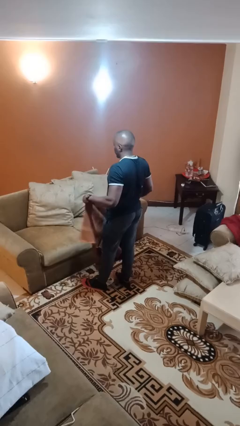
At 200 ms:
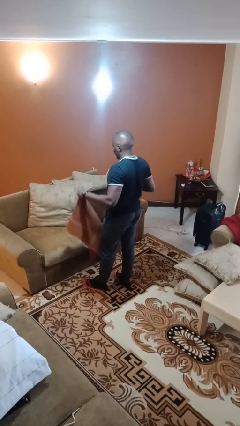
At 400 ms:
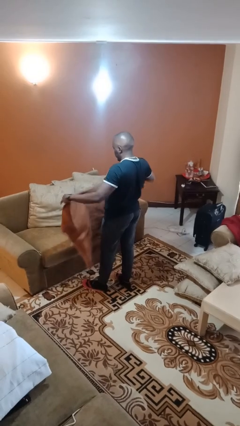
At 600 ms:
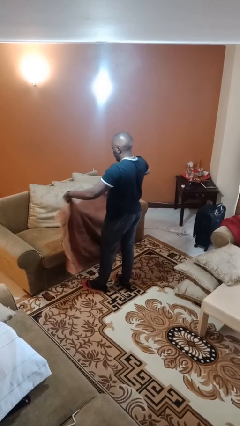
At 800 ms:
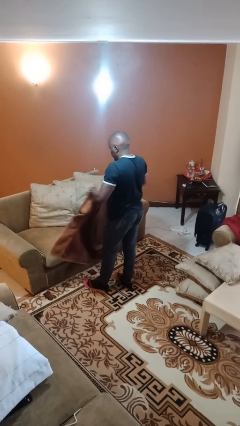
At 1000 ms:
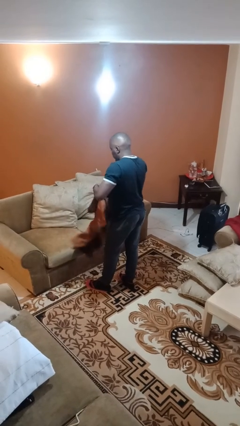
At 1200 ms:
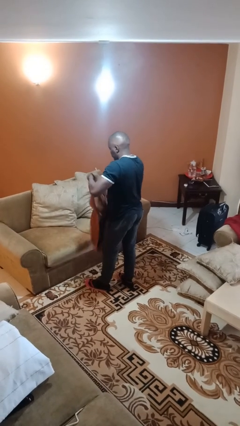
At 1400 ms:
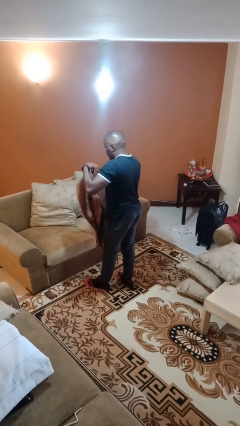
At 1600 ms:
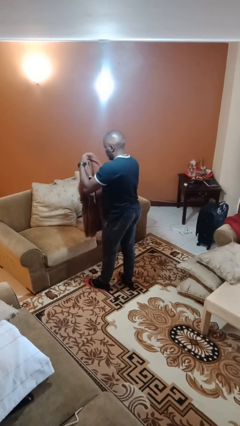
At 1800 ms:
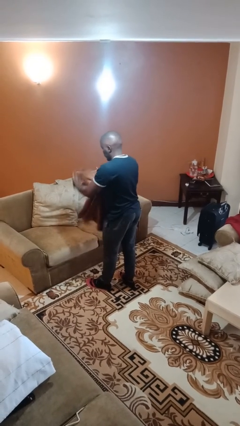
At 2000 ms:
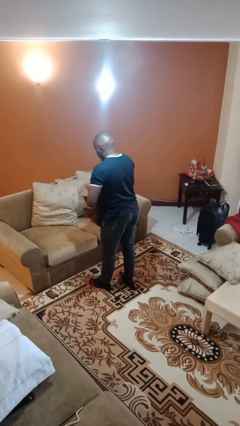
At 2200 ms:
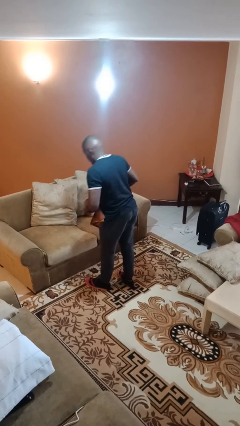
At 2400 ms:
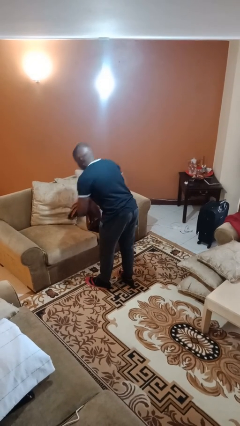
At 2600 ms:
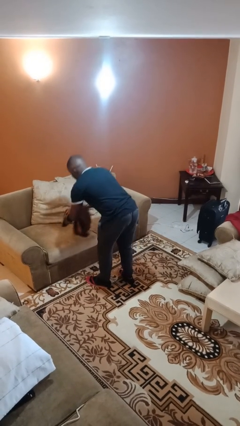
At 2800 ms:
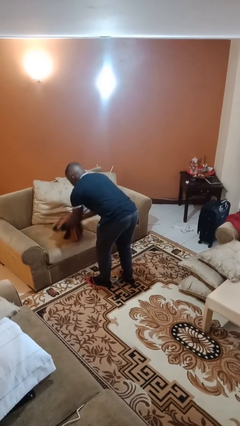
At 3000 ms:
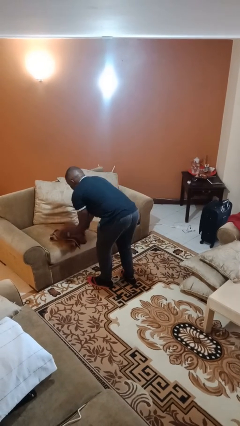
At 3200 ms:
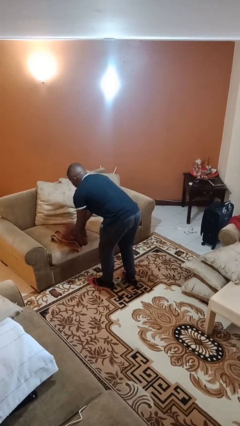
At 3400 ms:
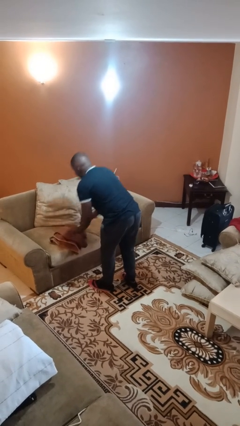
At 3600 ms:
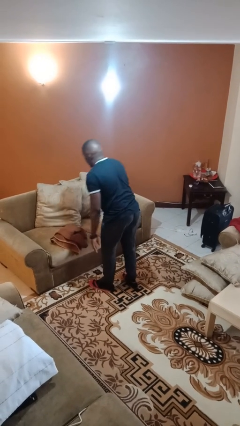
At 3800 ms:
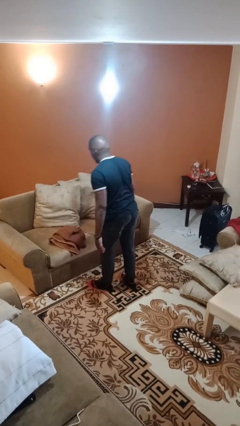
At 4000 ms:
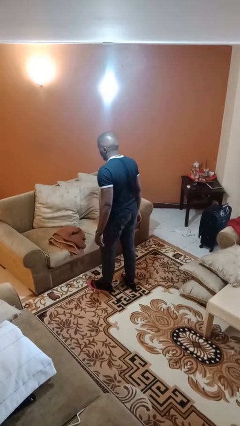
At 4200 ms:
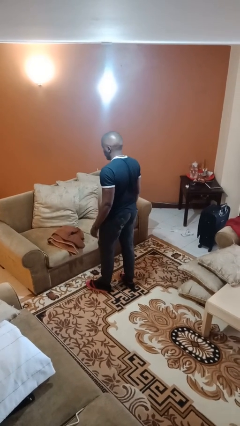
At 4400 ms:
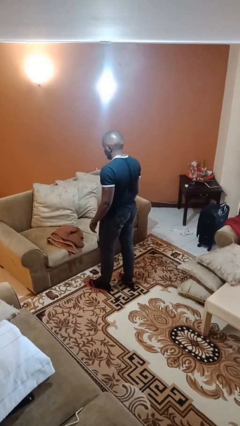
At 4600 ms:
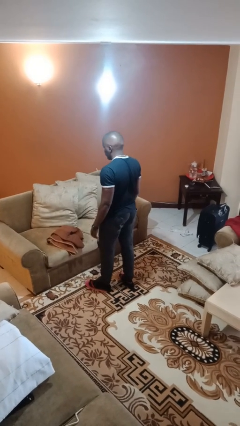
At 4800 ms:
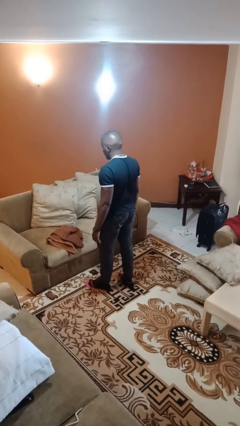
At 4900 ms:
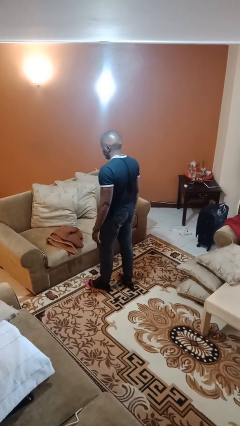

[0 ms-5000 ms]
person folds towel

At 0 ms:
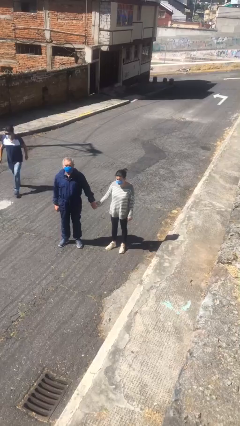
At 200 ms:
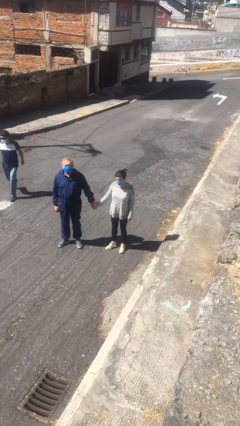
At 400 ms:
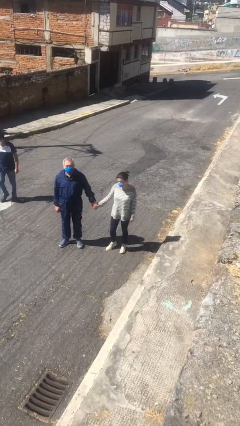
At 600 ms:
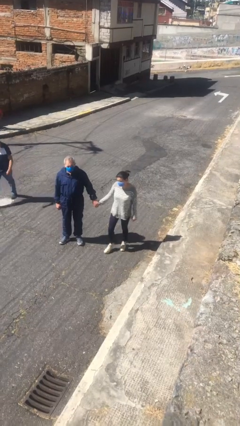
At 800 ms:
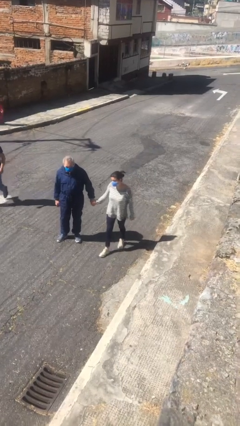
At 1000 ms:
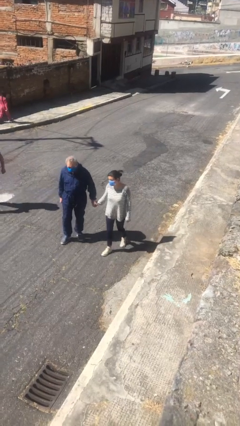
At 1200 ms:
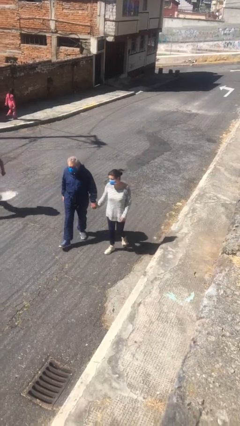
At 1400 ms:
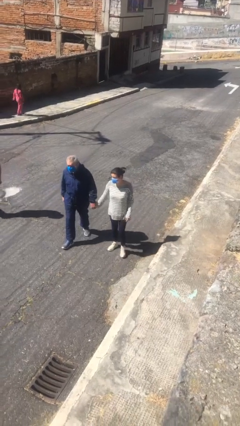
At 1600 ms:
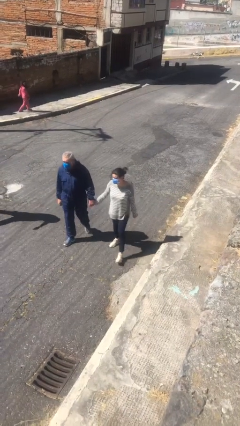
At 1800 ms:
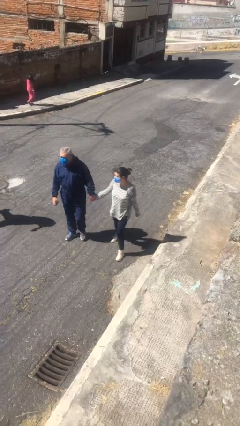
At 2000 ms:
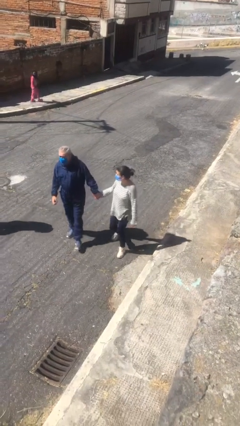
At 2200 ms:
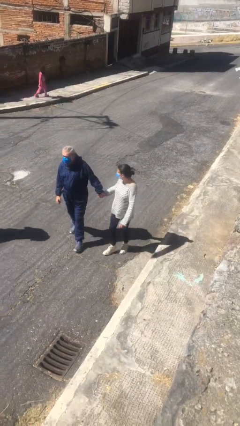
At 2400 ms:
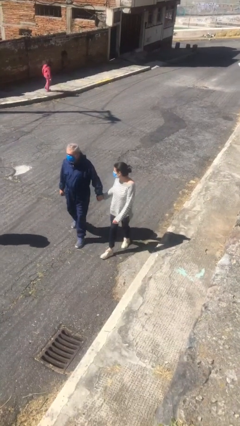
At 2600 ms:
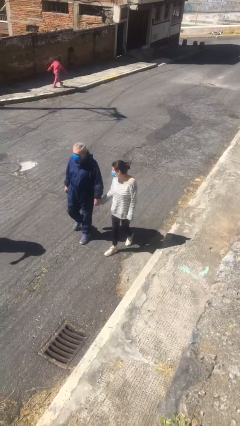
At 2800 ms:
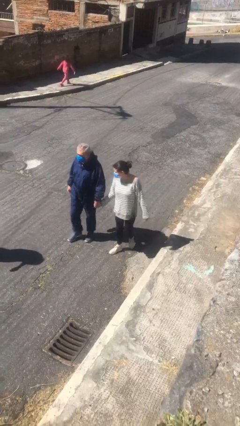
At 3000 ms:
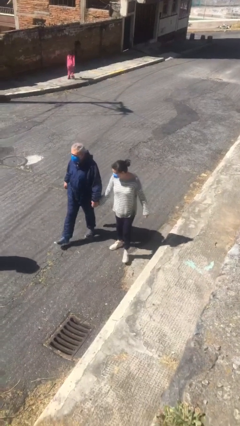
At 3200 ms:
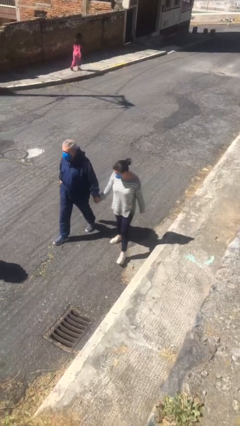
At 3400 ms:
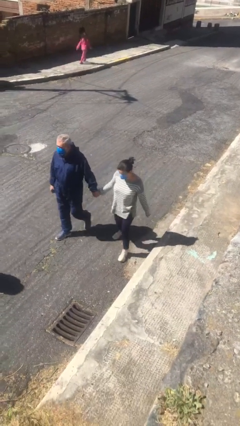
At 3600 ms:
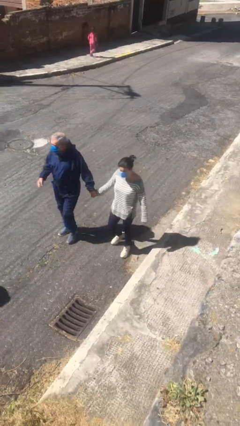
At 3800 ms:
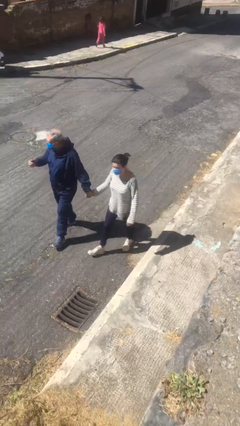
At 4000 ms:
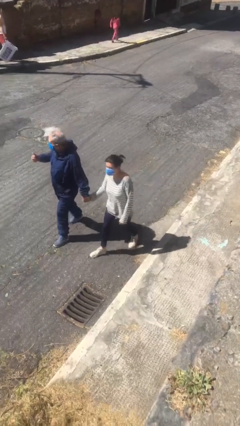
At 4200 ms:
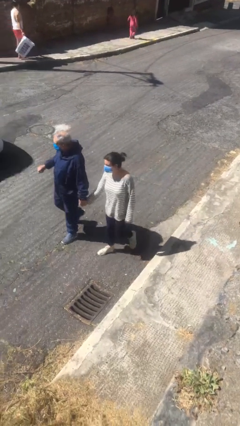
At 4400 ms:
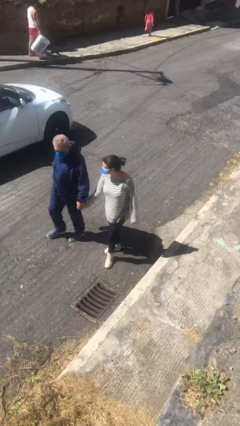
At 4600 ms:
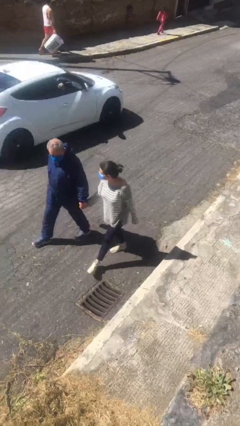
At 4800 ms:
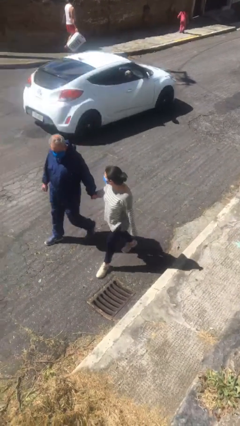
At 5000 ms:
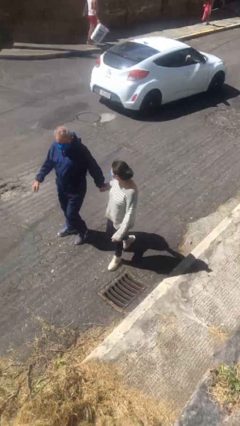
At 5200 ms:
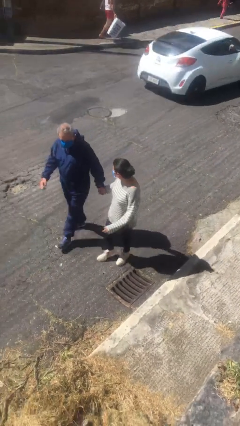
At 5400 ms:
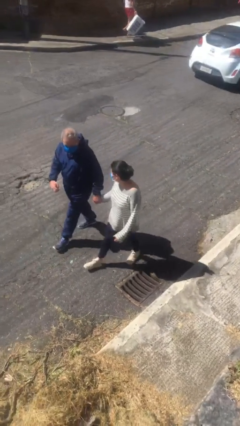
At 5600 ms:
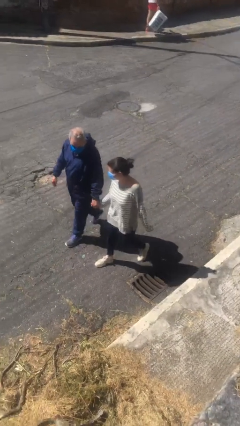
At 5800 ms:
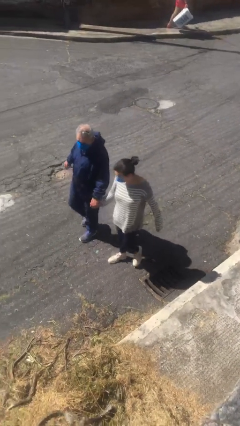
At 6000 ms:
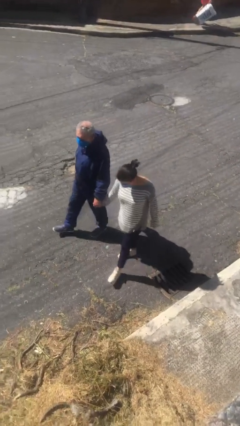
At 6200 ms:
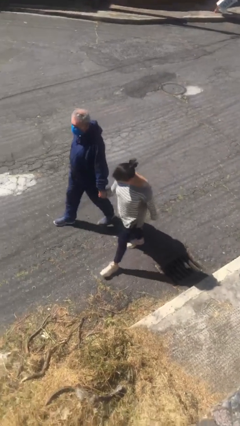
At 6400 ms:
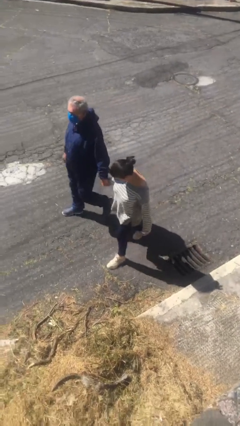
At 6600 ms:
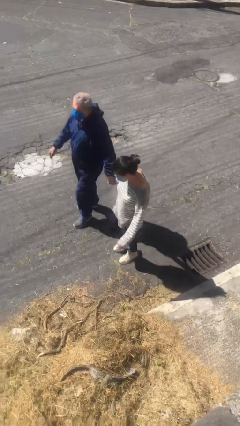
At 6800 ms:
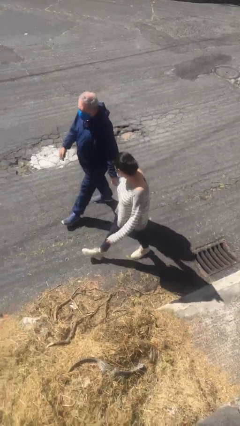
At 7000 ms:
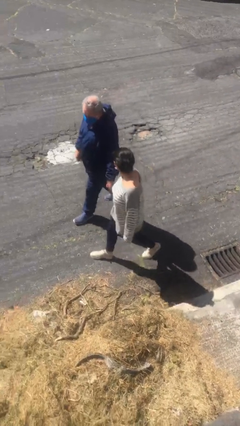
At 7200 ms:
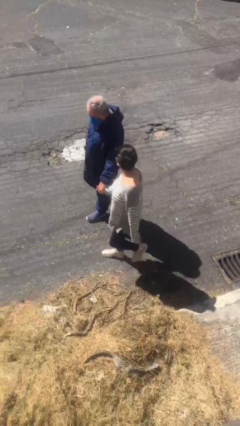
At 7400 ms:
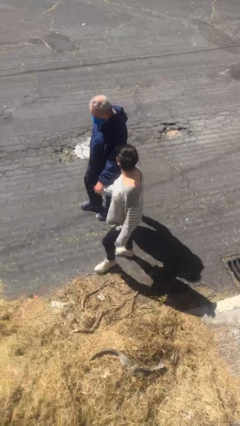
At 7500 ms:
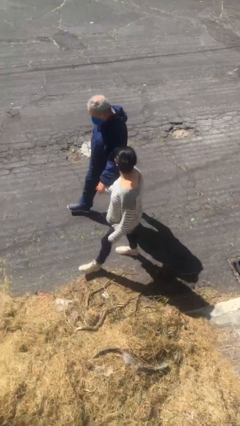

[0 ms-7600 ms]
person holds hand

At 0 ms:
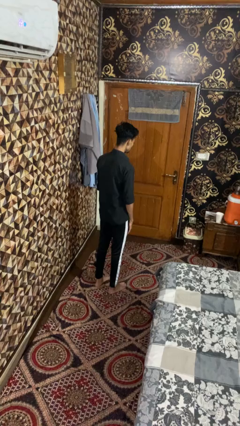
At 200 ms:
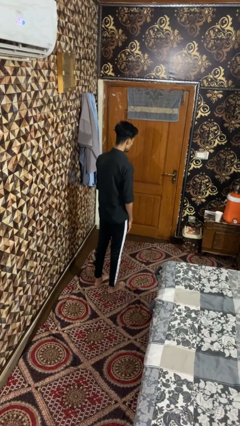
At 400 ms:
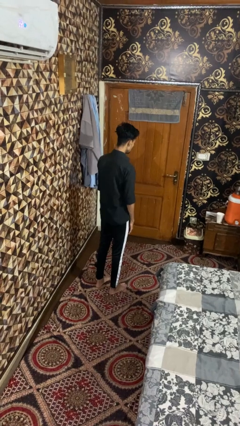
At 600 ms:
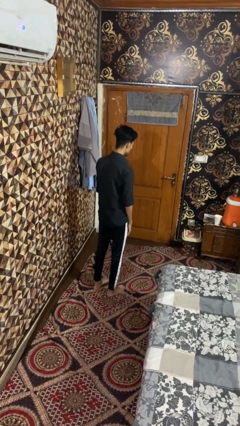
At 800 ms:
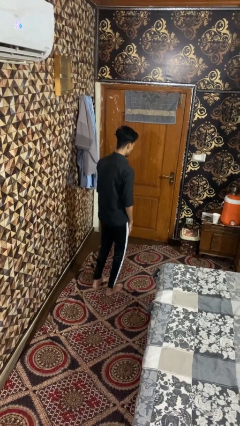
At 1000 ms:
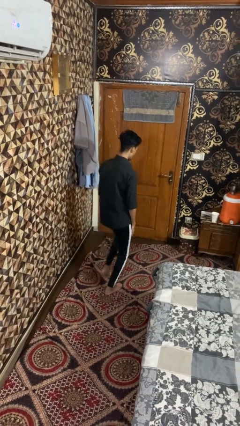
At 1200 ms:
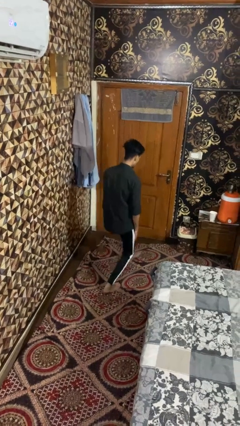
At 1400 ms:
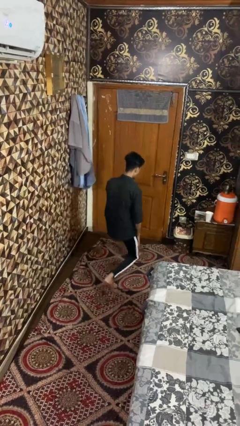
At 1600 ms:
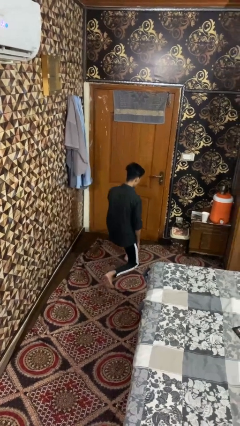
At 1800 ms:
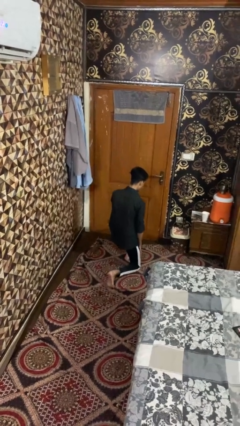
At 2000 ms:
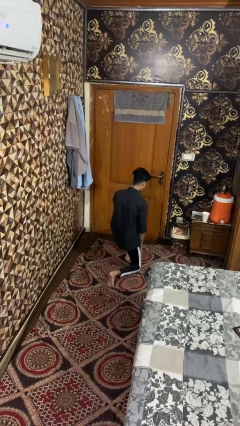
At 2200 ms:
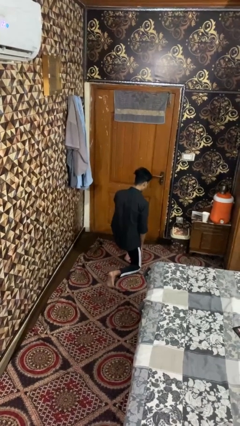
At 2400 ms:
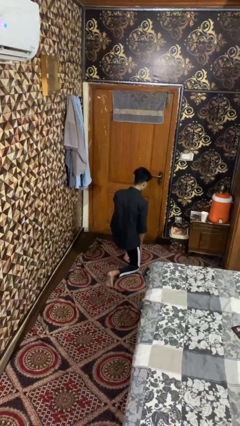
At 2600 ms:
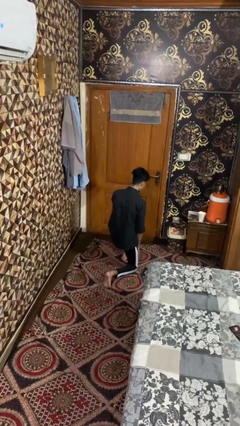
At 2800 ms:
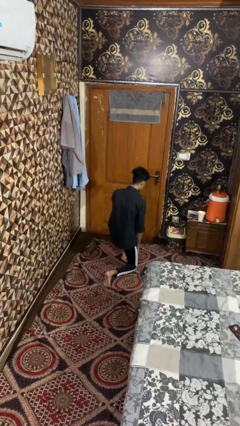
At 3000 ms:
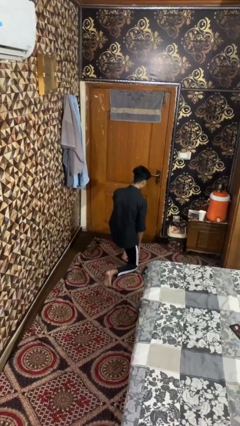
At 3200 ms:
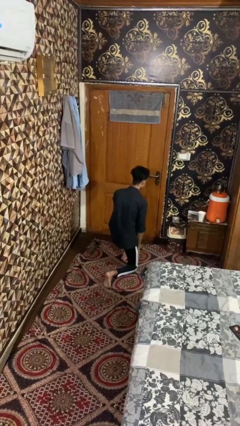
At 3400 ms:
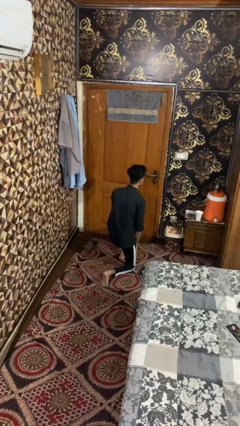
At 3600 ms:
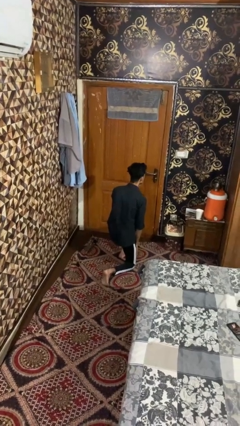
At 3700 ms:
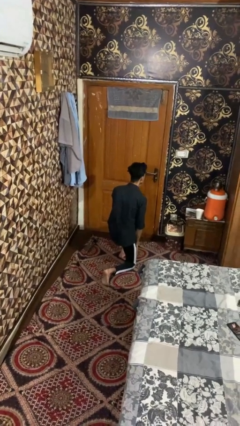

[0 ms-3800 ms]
person exercises with lunges

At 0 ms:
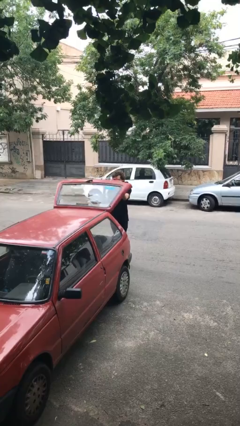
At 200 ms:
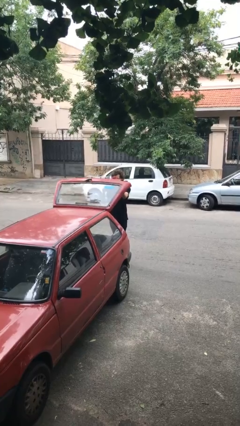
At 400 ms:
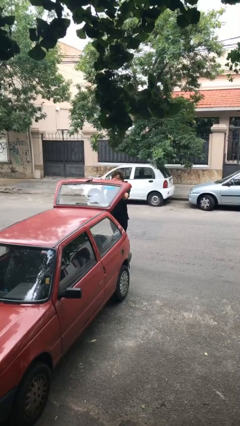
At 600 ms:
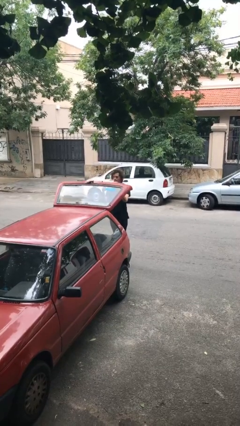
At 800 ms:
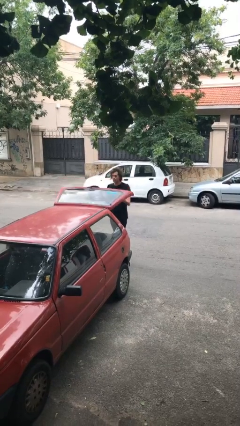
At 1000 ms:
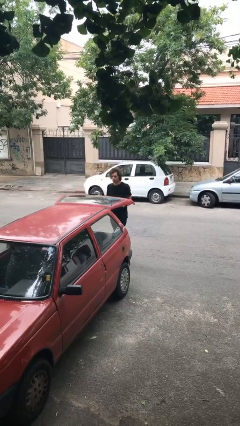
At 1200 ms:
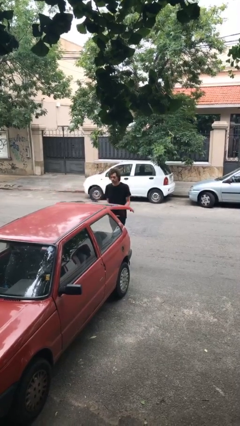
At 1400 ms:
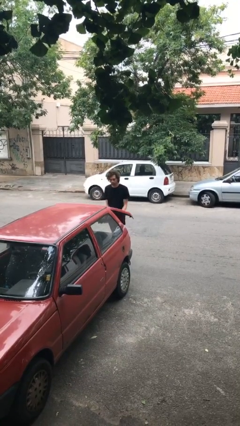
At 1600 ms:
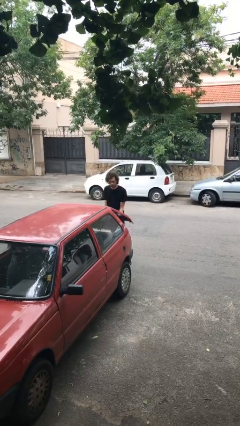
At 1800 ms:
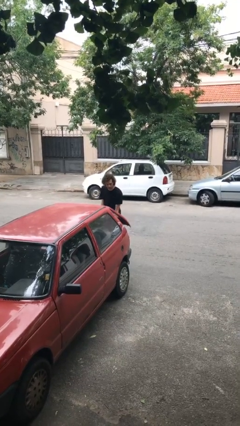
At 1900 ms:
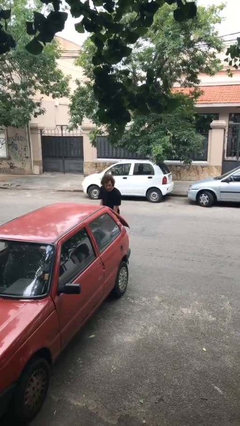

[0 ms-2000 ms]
person closes car trunk
